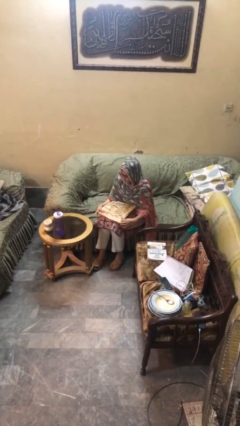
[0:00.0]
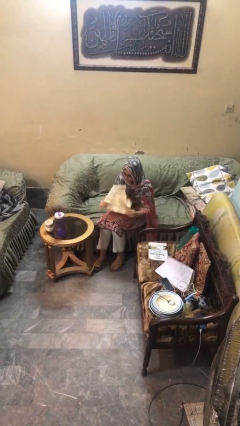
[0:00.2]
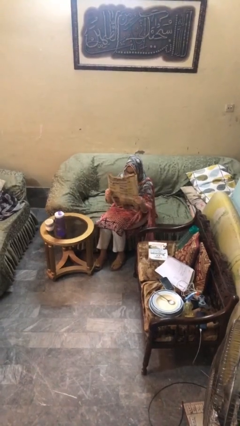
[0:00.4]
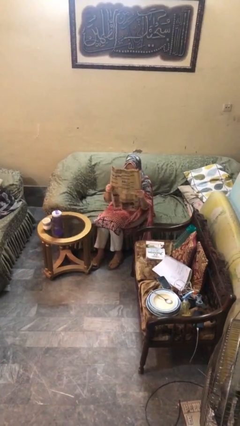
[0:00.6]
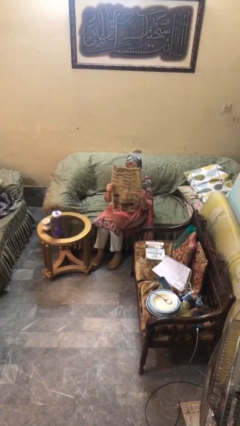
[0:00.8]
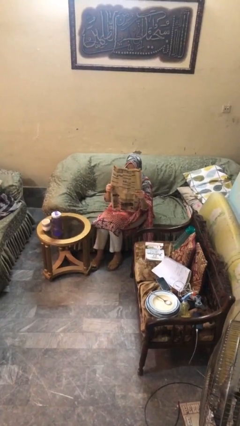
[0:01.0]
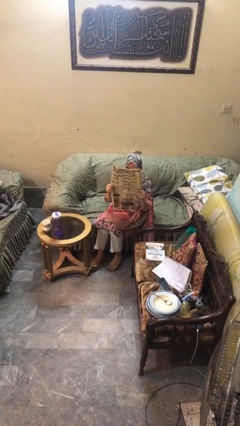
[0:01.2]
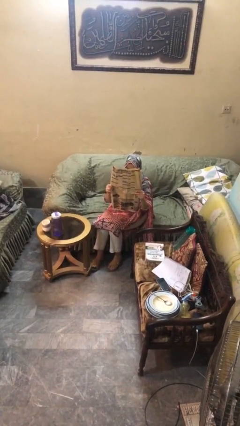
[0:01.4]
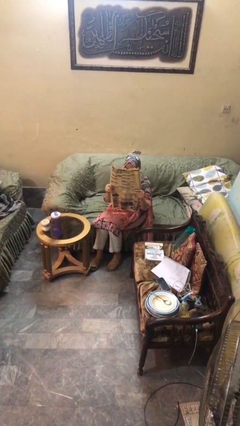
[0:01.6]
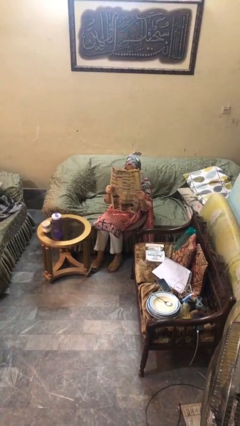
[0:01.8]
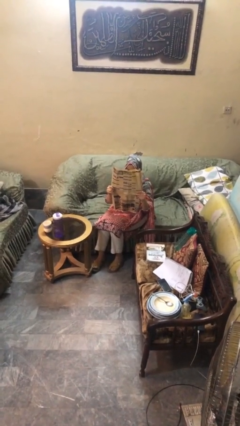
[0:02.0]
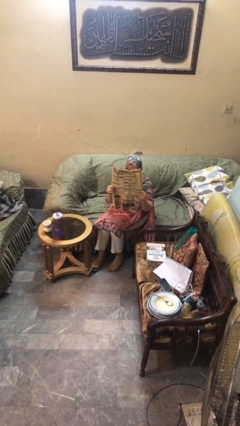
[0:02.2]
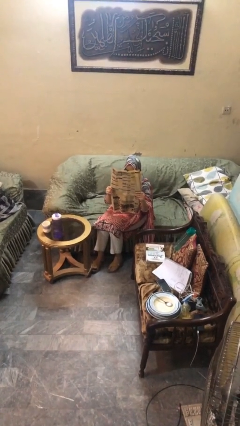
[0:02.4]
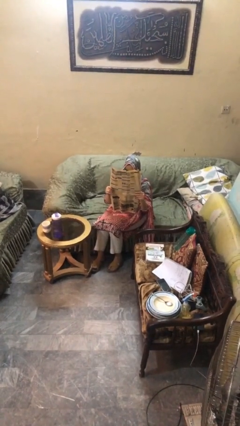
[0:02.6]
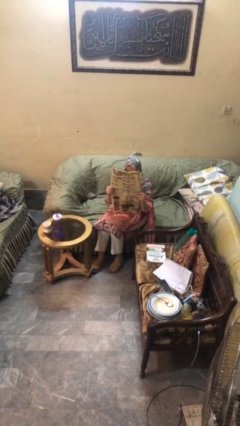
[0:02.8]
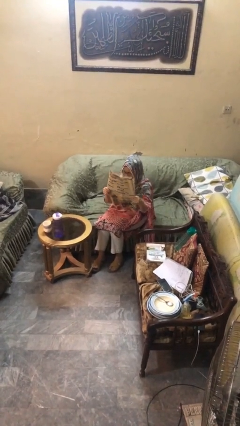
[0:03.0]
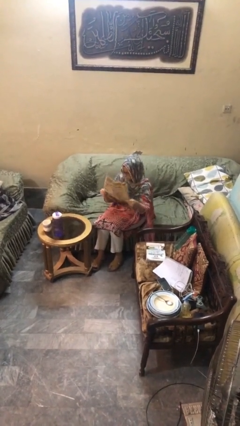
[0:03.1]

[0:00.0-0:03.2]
person reads newspaper

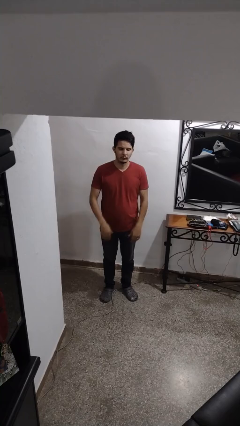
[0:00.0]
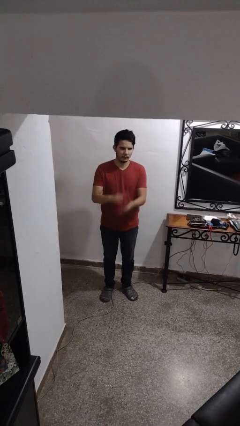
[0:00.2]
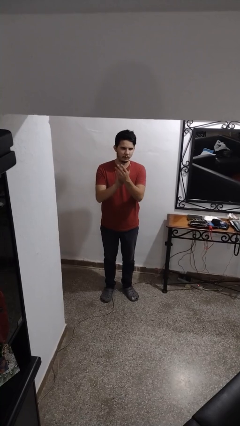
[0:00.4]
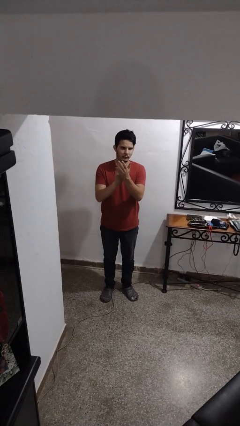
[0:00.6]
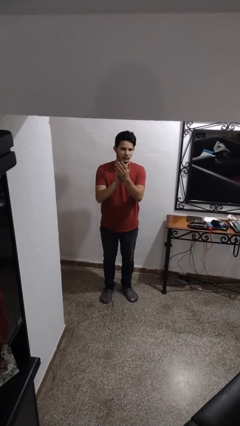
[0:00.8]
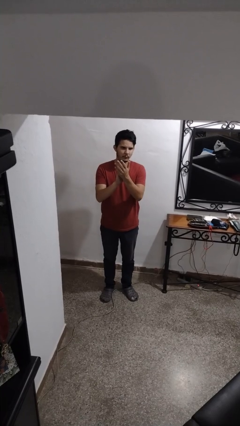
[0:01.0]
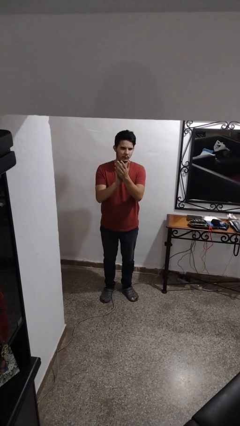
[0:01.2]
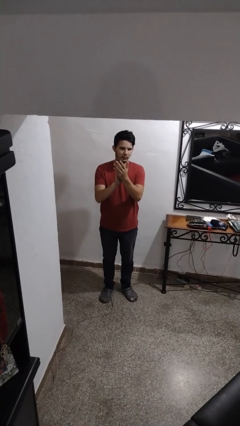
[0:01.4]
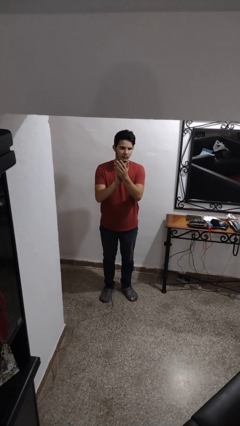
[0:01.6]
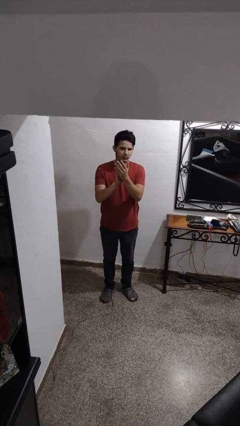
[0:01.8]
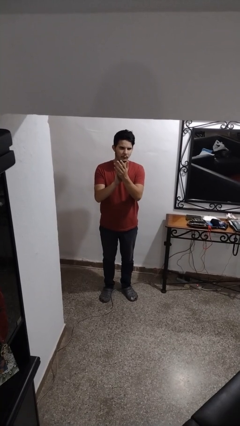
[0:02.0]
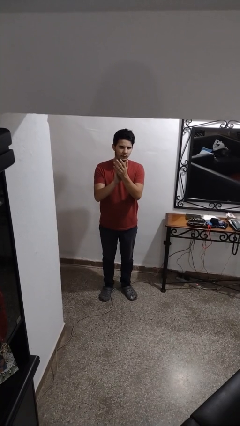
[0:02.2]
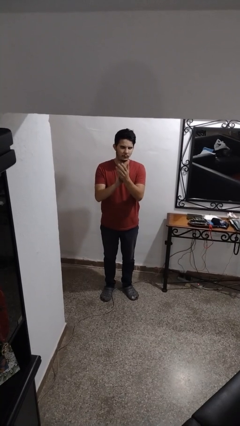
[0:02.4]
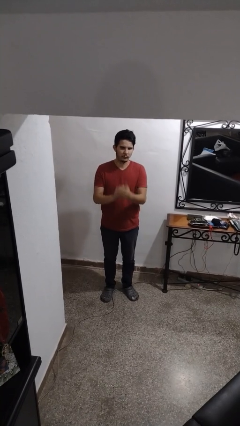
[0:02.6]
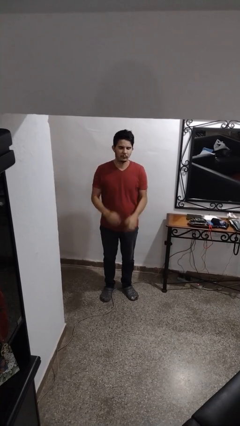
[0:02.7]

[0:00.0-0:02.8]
person claps hands

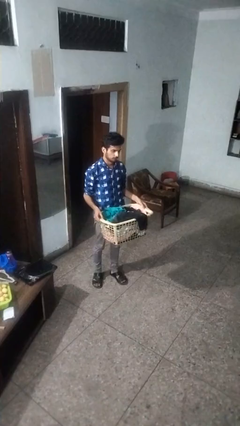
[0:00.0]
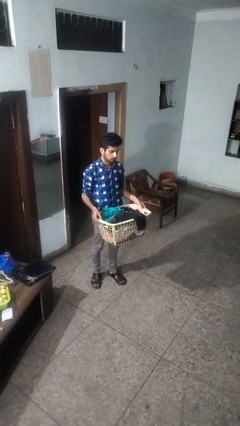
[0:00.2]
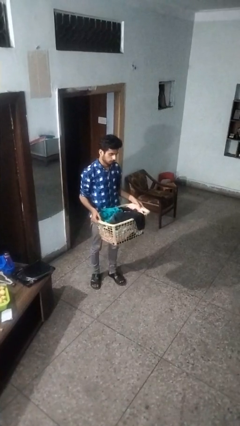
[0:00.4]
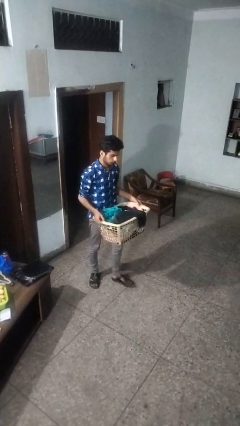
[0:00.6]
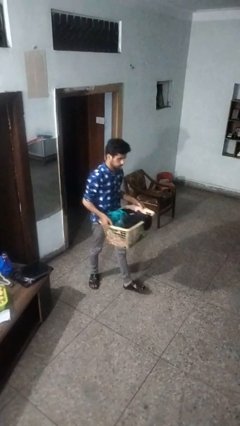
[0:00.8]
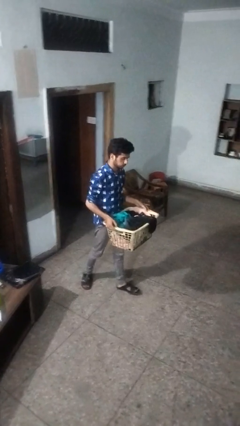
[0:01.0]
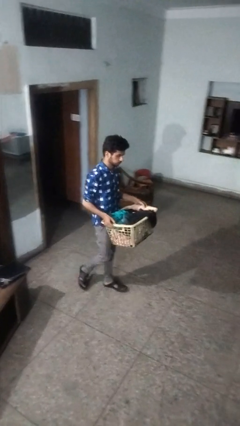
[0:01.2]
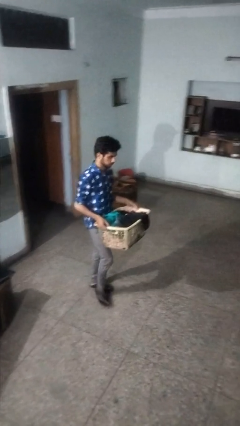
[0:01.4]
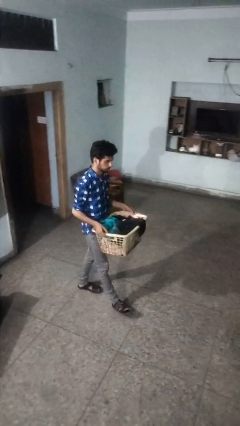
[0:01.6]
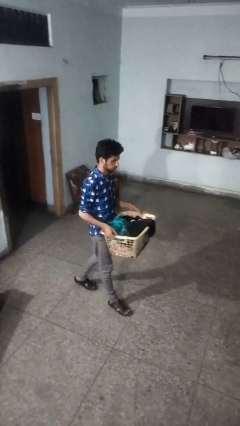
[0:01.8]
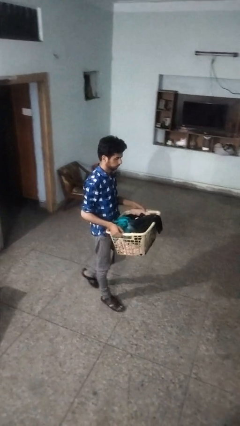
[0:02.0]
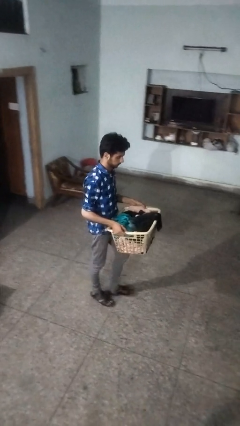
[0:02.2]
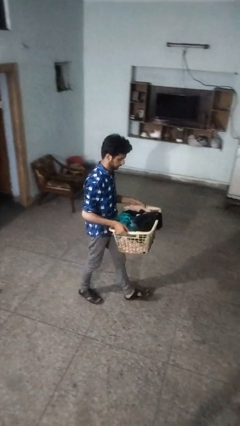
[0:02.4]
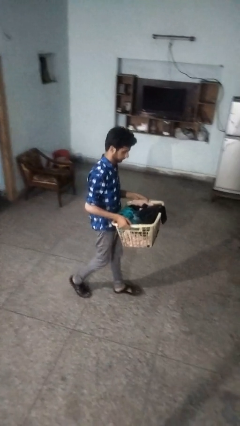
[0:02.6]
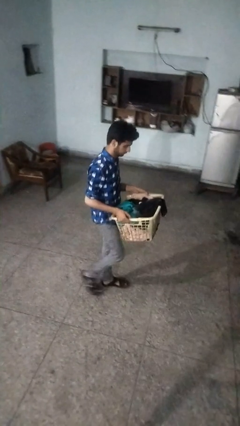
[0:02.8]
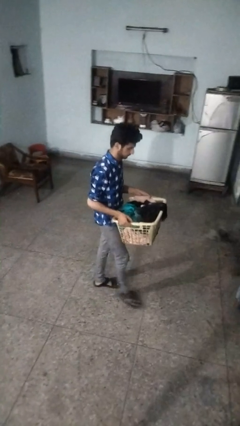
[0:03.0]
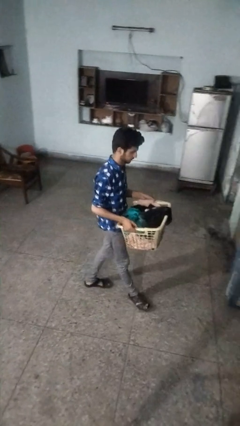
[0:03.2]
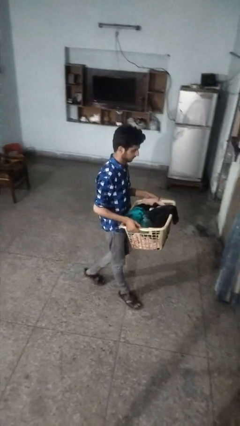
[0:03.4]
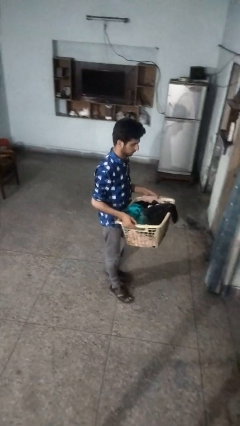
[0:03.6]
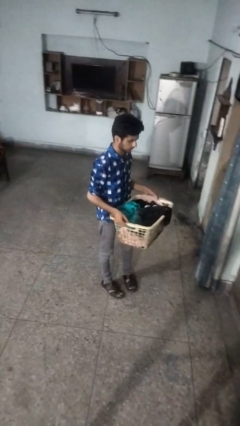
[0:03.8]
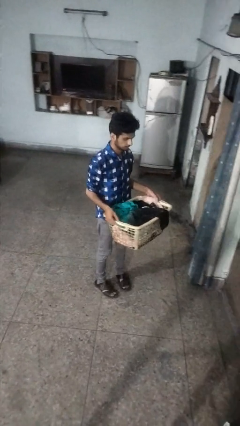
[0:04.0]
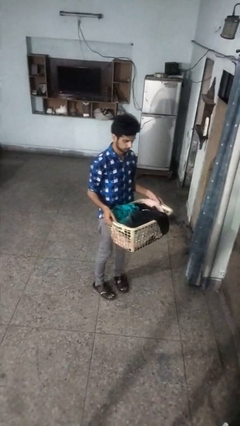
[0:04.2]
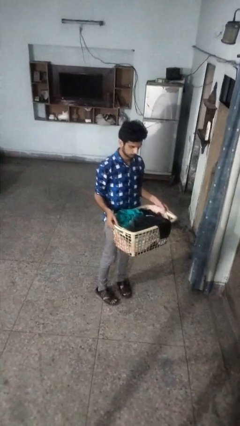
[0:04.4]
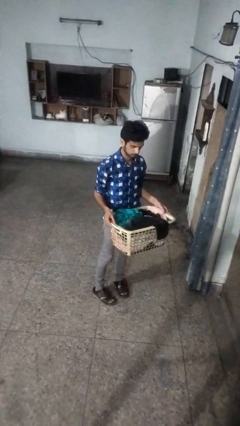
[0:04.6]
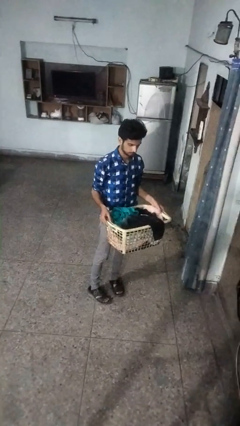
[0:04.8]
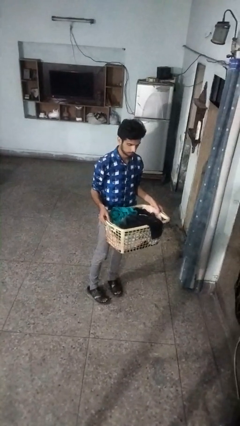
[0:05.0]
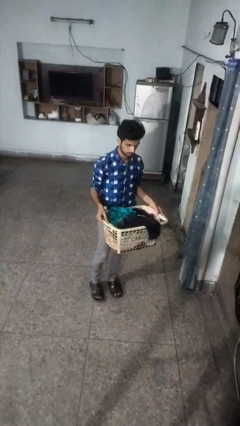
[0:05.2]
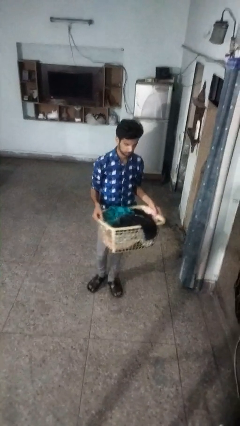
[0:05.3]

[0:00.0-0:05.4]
person carries laundry basket

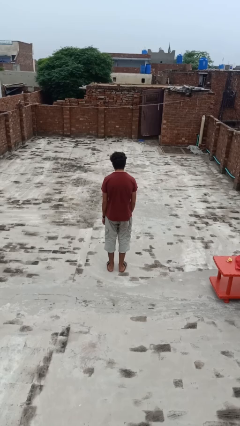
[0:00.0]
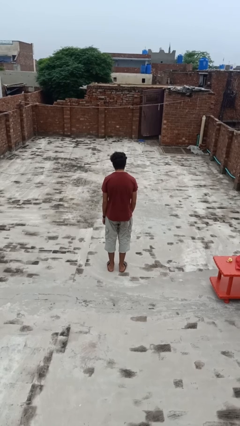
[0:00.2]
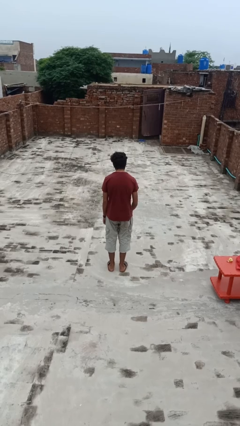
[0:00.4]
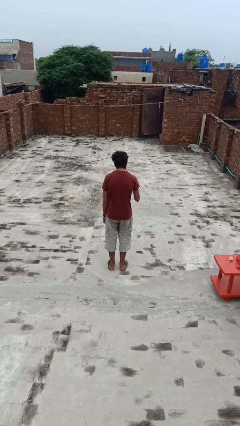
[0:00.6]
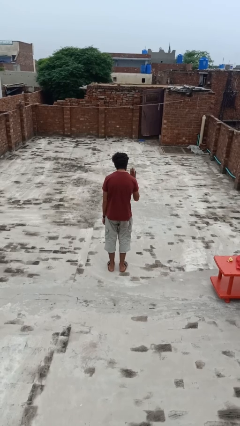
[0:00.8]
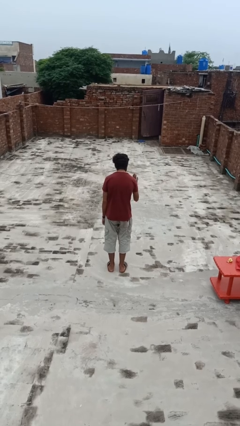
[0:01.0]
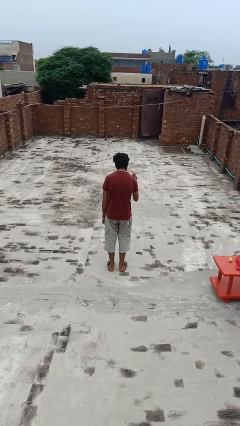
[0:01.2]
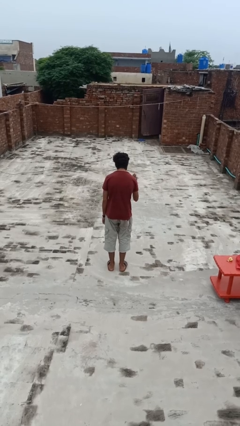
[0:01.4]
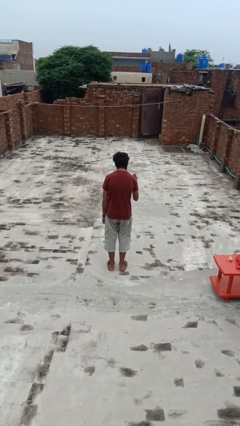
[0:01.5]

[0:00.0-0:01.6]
person gestures stop

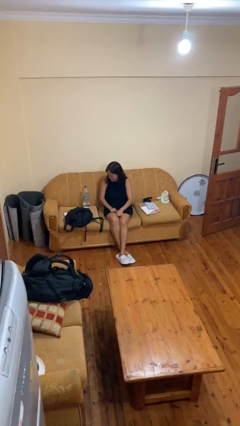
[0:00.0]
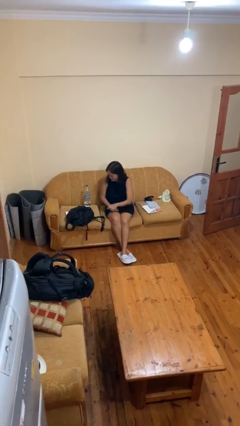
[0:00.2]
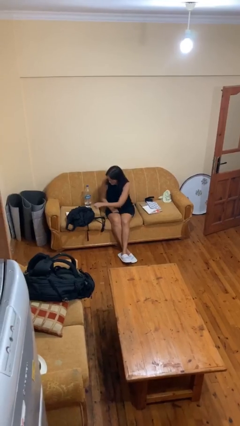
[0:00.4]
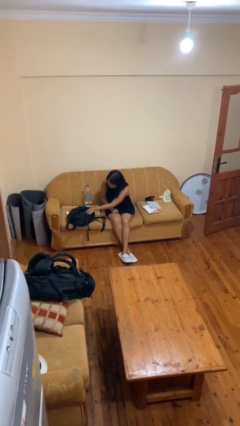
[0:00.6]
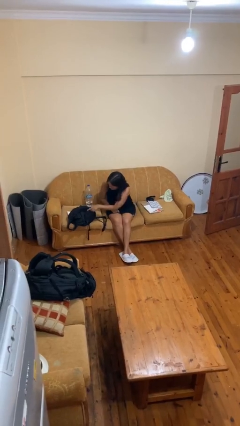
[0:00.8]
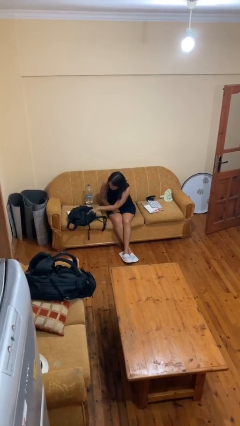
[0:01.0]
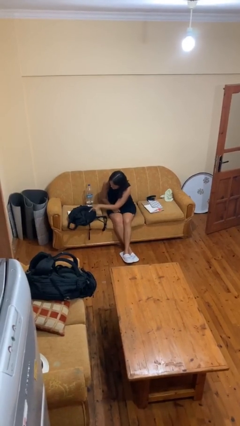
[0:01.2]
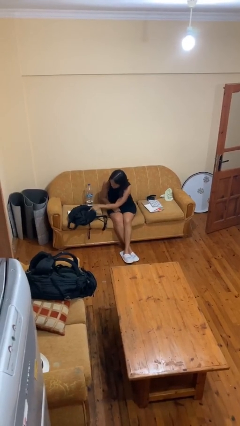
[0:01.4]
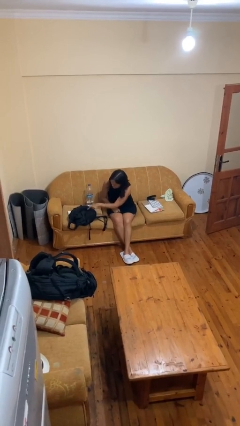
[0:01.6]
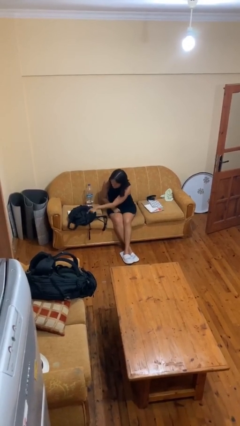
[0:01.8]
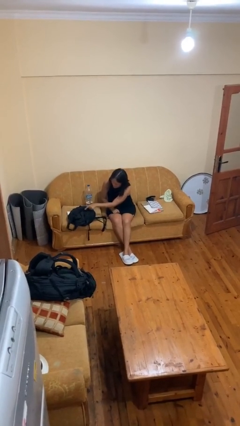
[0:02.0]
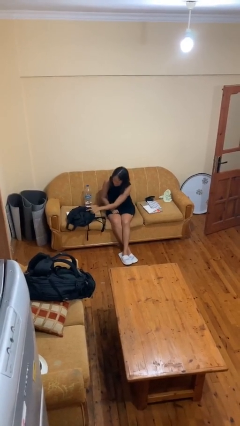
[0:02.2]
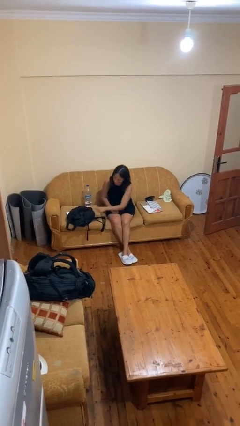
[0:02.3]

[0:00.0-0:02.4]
person taps object with finger

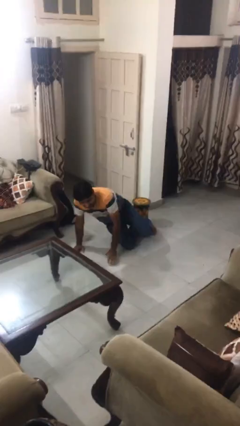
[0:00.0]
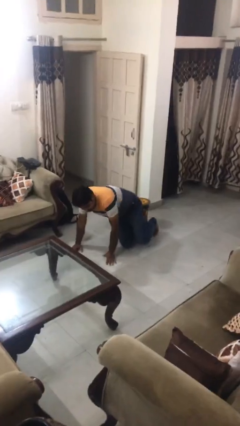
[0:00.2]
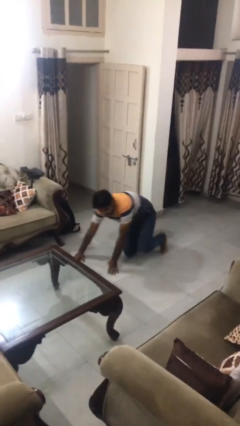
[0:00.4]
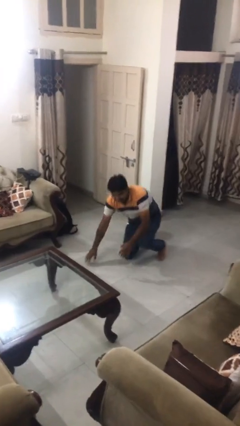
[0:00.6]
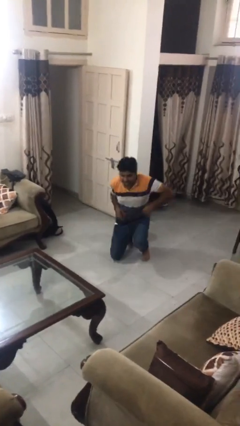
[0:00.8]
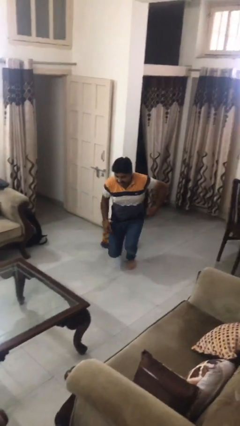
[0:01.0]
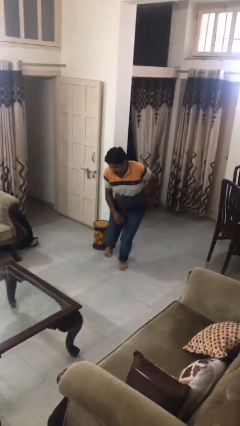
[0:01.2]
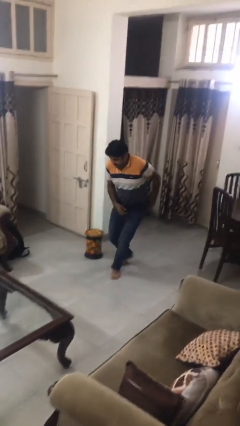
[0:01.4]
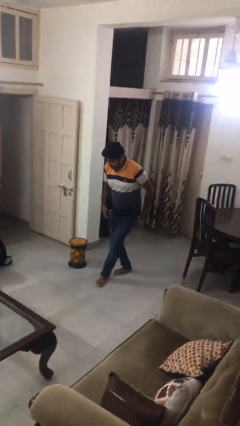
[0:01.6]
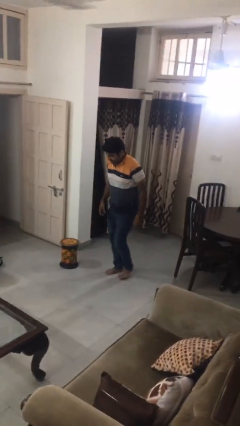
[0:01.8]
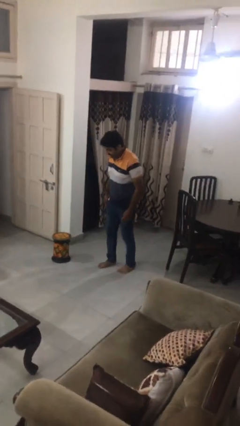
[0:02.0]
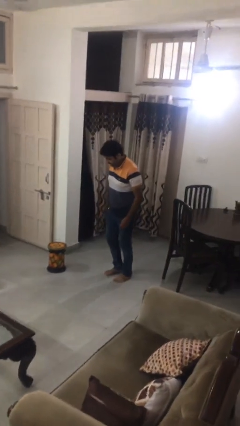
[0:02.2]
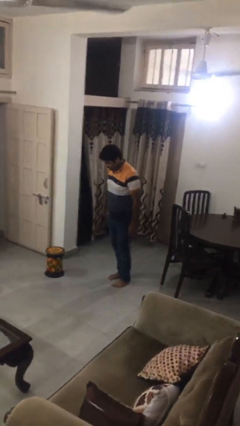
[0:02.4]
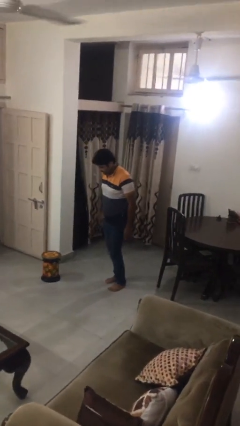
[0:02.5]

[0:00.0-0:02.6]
person stands up from floor
